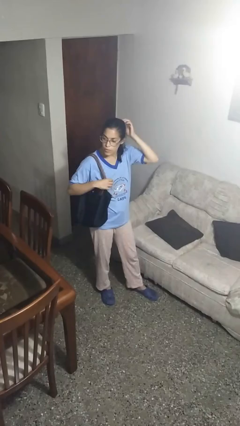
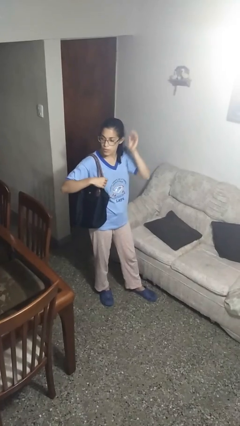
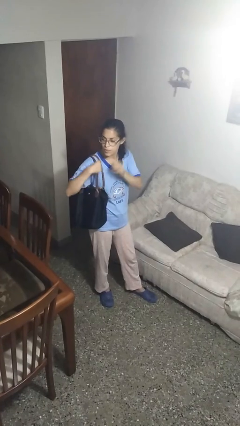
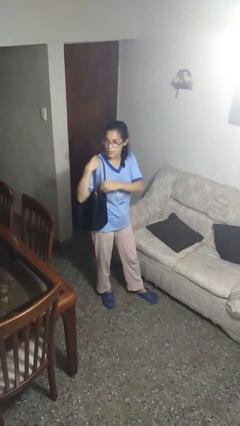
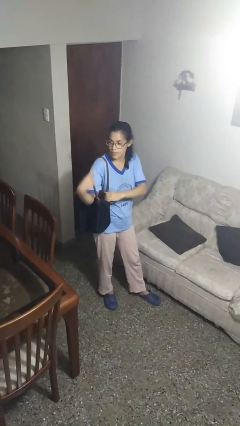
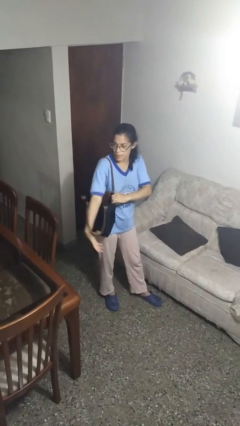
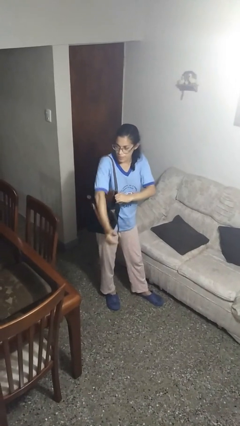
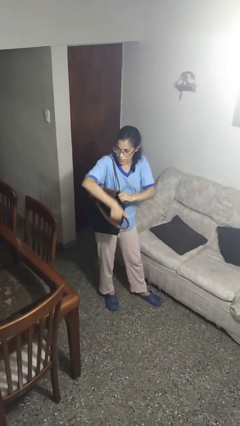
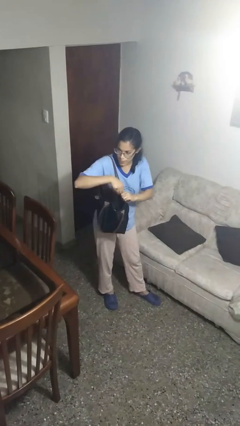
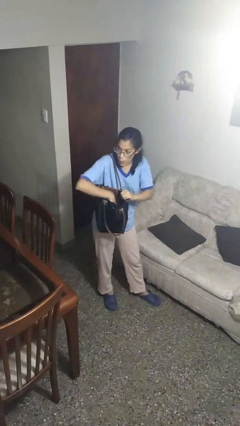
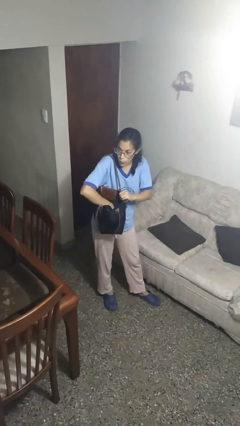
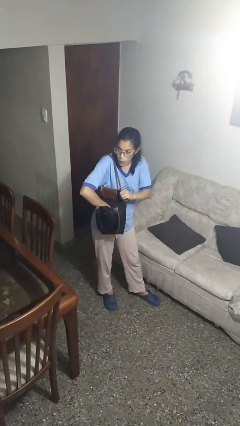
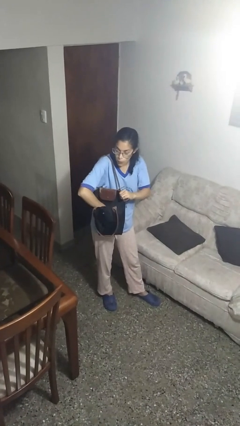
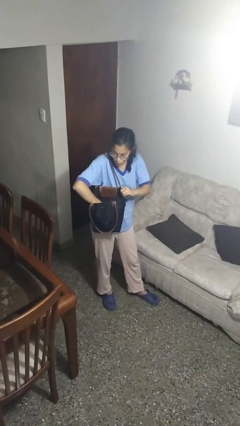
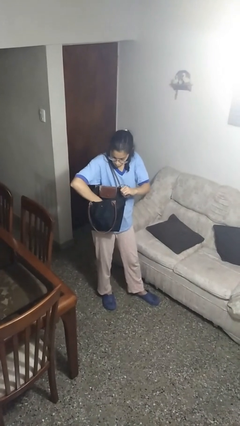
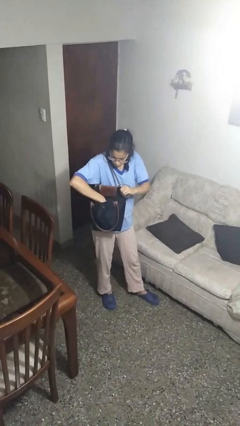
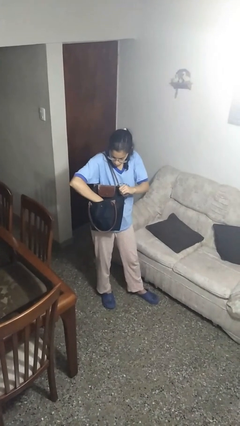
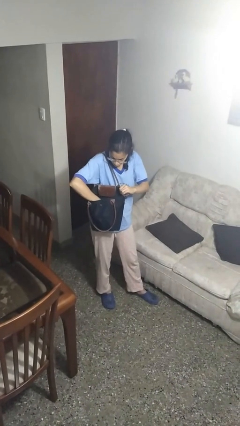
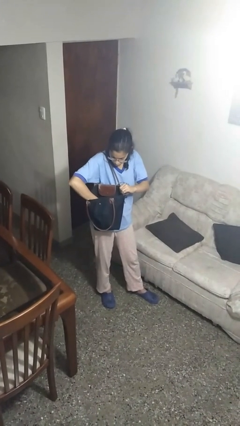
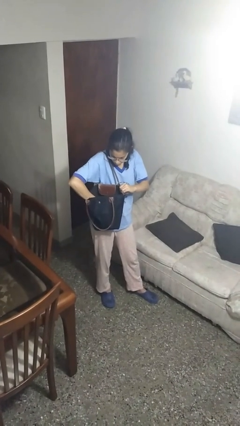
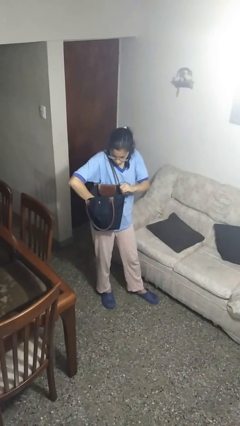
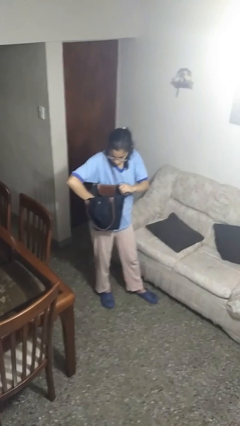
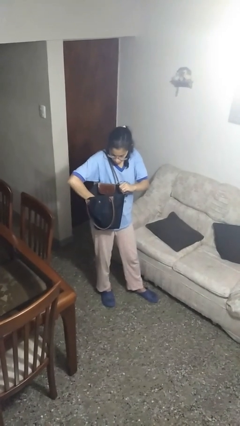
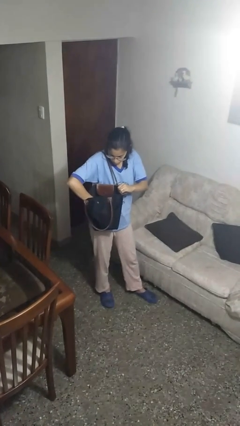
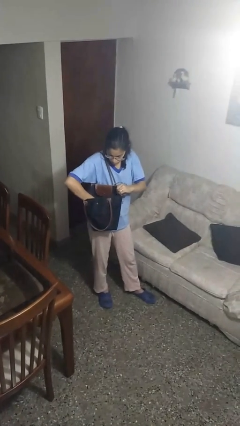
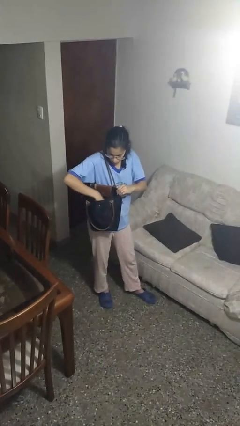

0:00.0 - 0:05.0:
person searches in purse

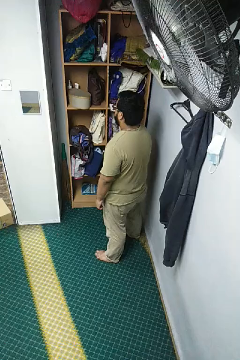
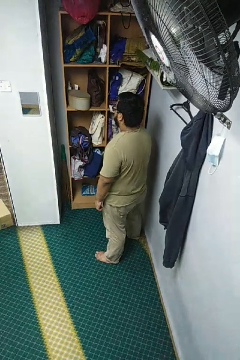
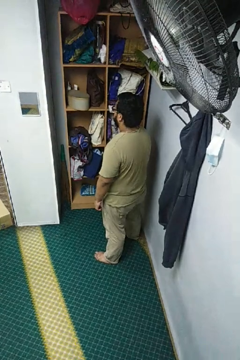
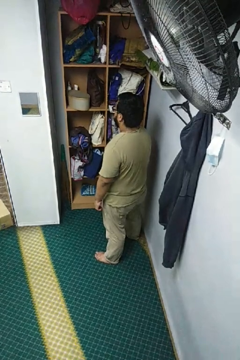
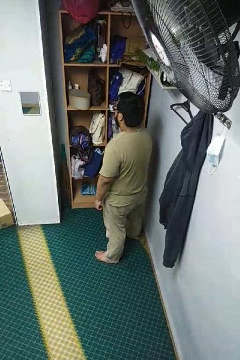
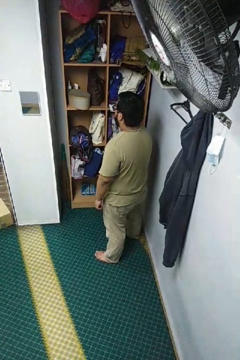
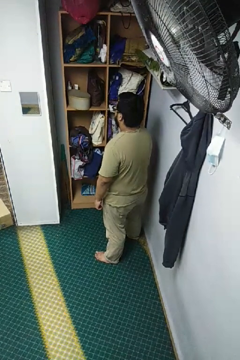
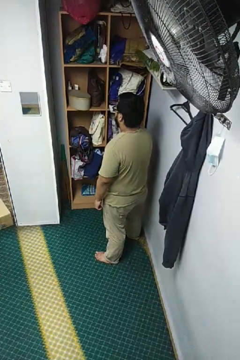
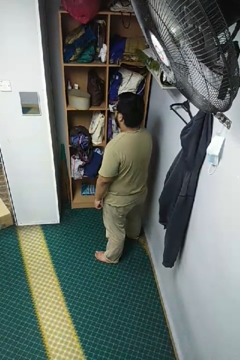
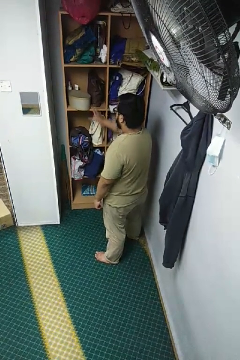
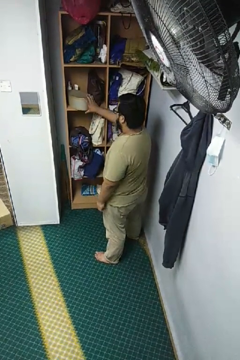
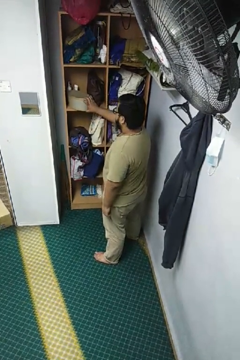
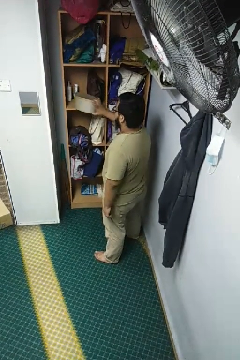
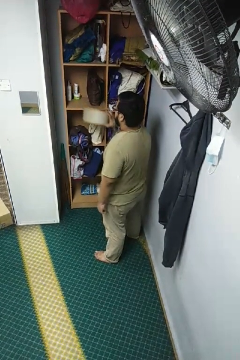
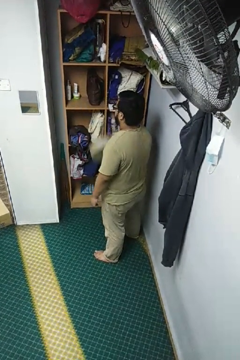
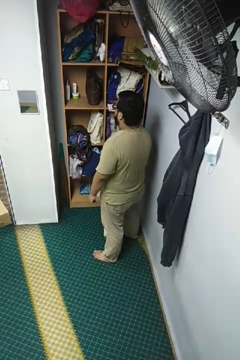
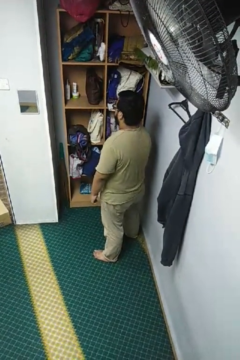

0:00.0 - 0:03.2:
person picks up object from cabinet

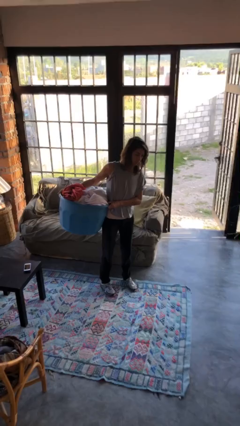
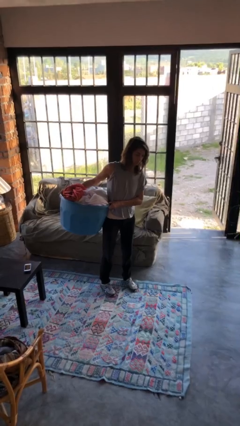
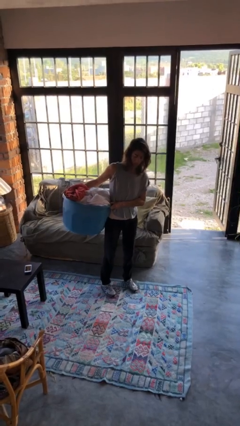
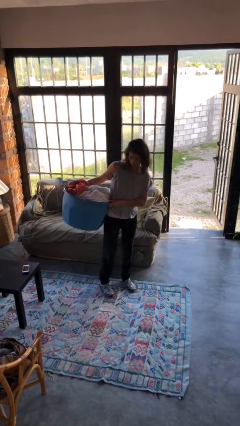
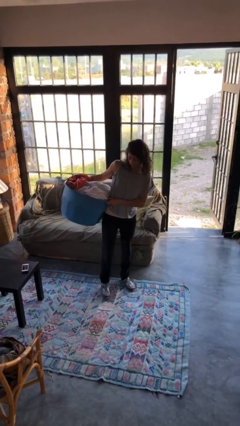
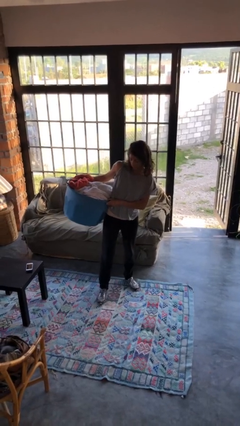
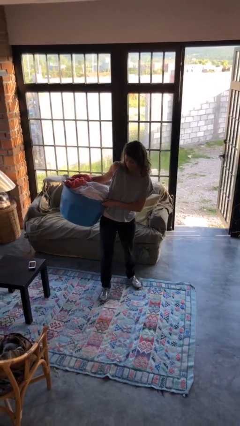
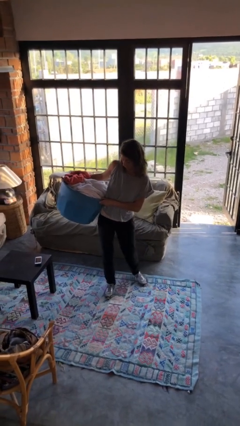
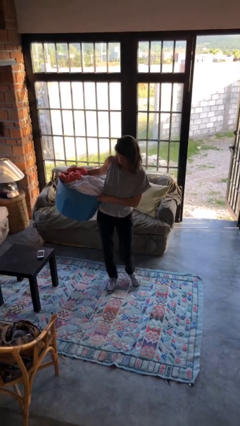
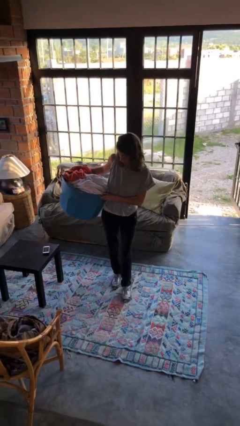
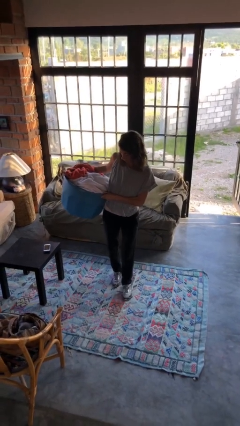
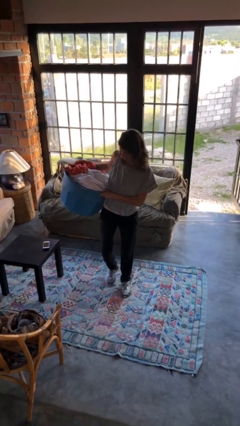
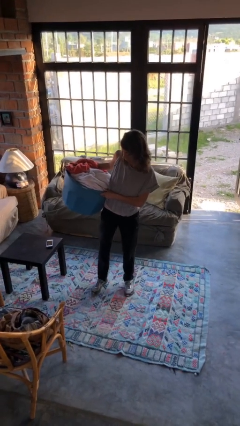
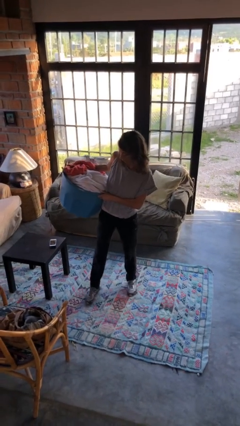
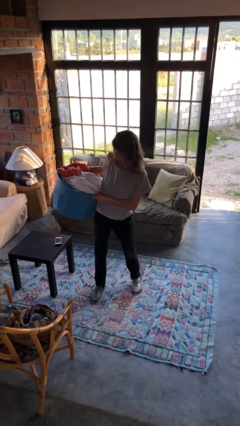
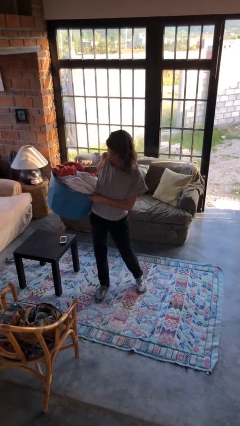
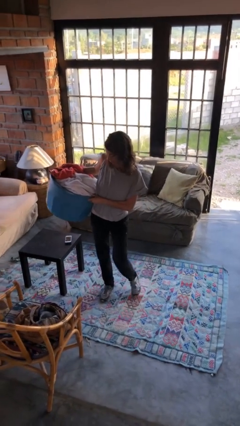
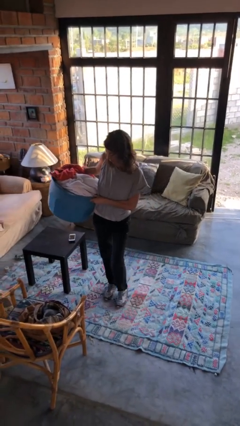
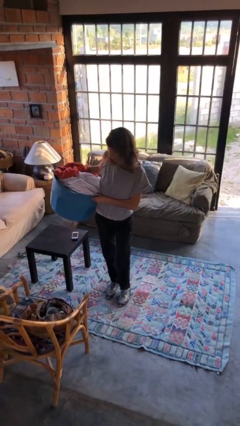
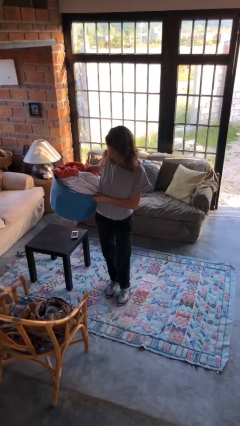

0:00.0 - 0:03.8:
person carries laundry basket

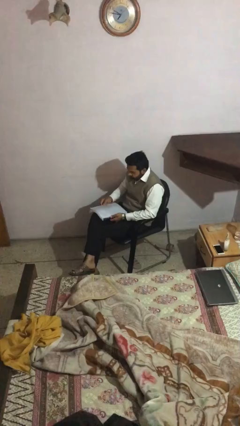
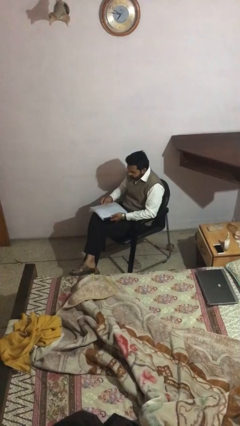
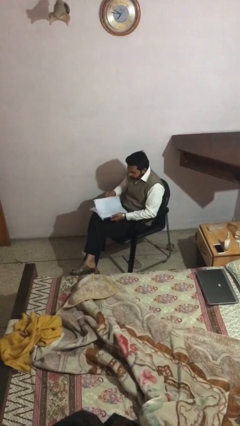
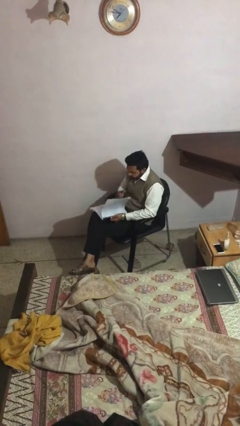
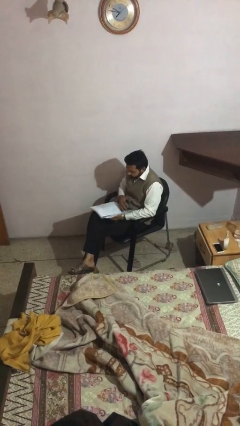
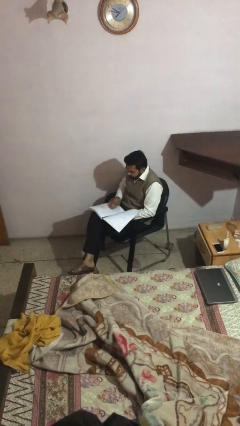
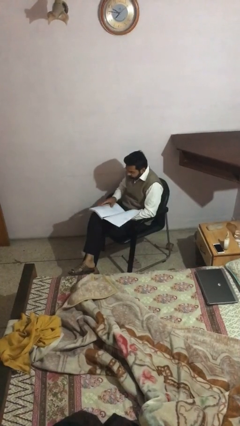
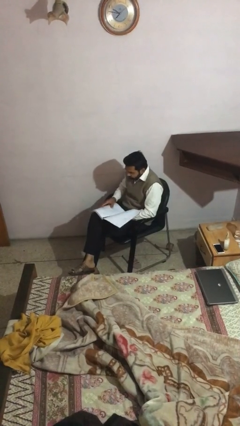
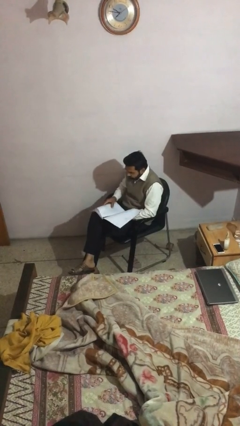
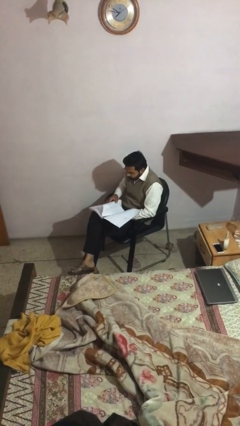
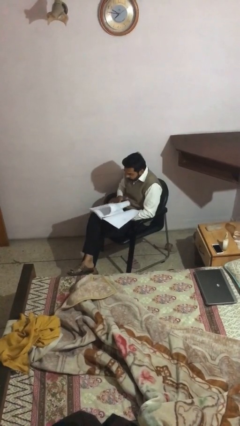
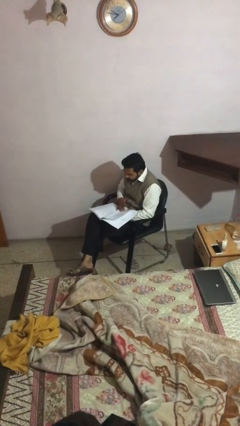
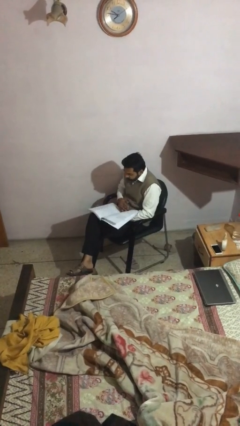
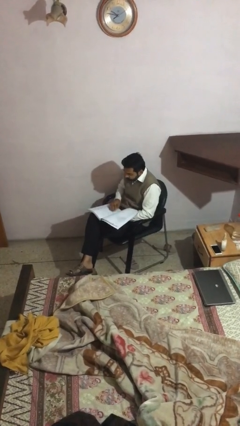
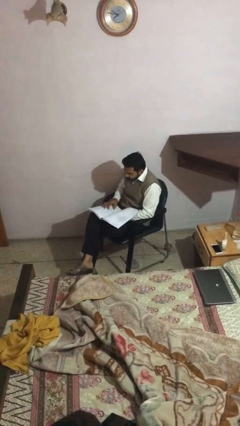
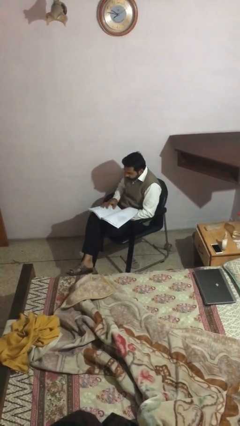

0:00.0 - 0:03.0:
person reads document

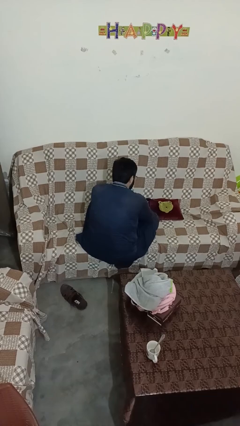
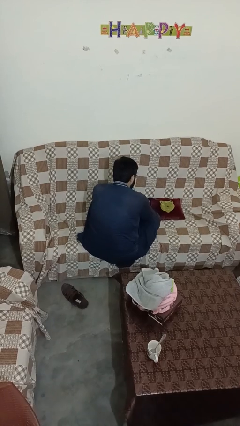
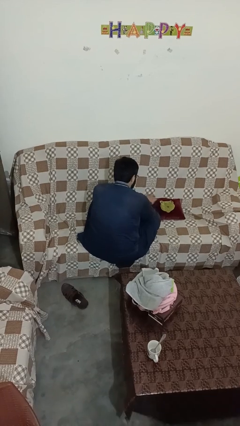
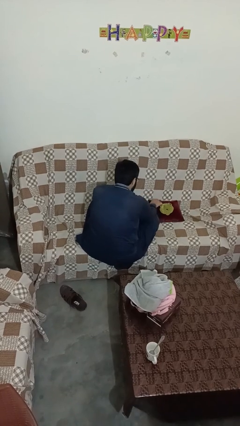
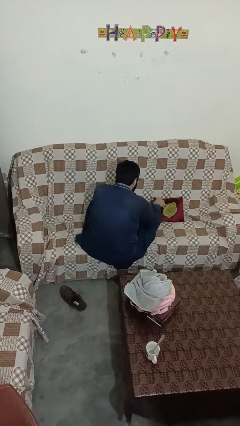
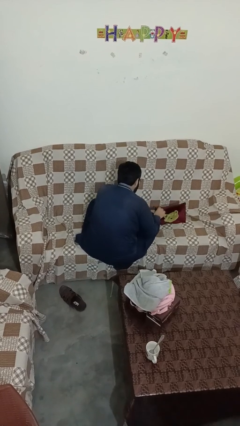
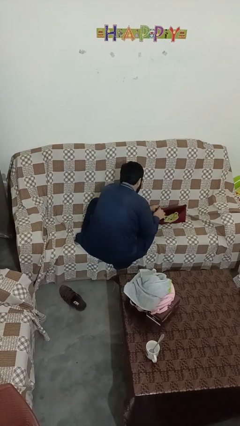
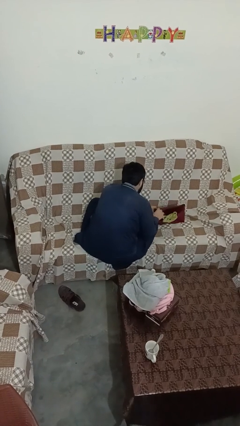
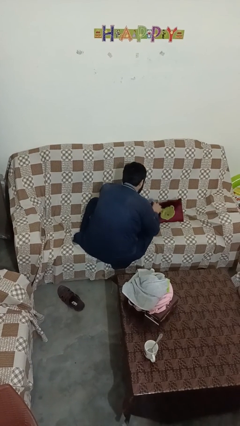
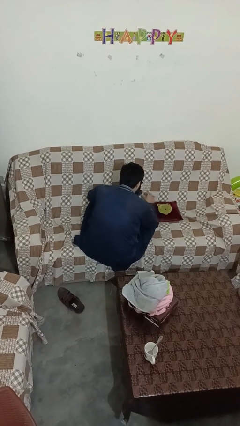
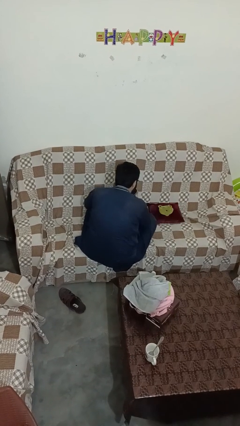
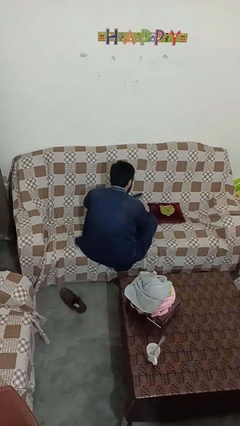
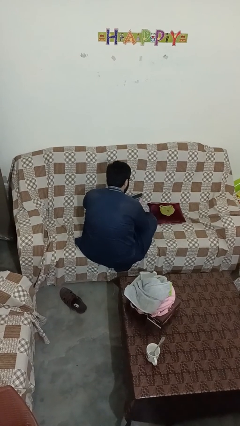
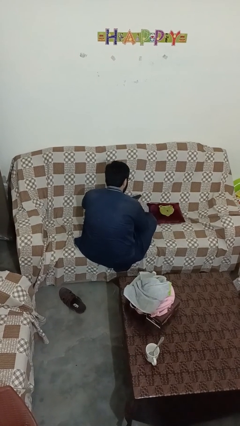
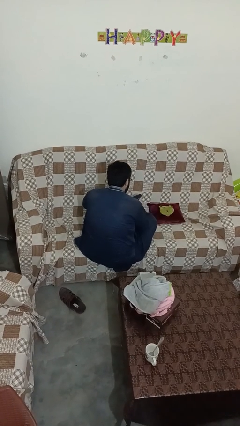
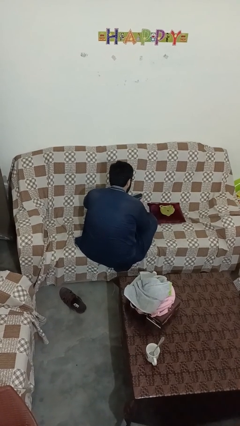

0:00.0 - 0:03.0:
person searches in couch
